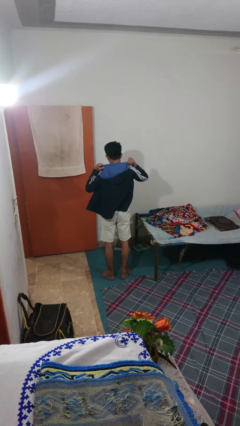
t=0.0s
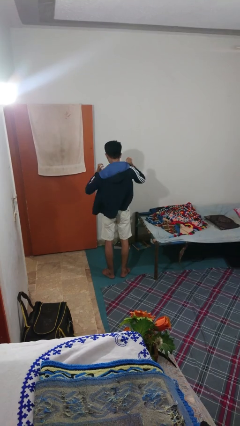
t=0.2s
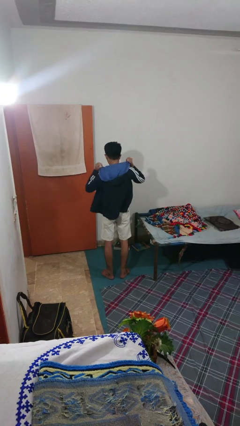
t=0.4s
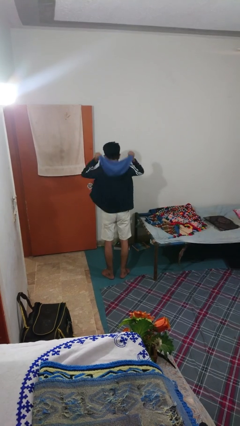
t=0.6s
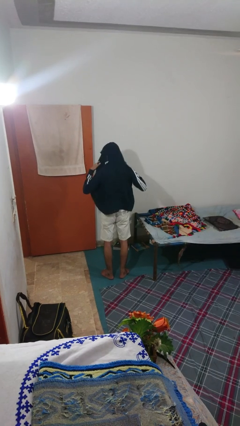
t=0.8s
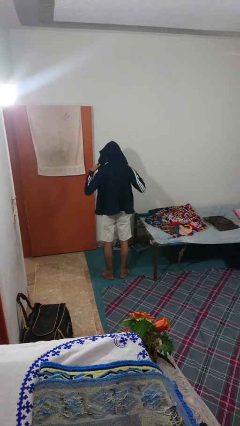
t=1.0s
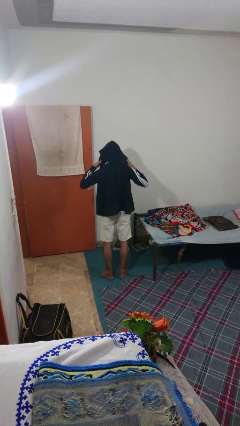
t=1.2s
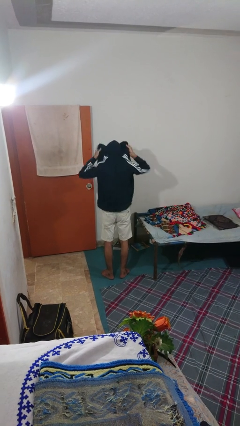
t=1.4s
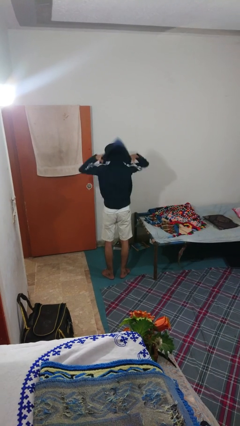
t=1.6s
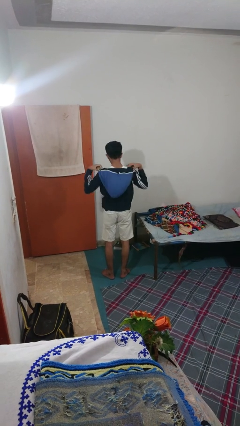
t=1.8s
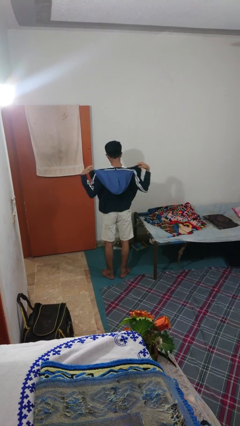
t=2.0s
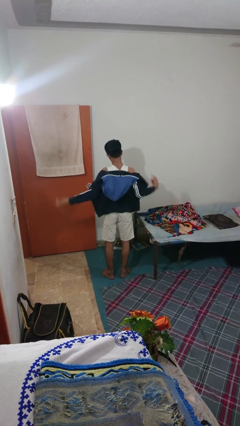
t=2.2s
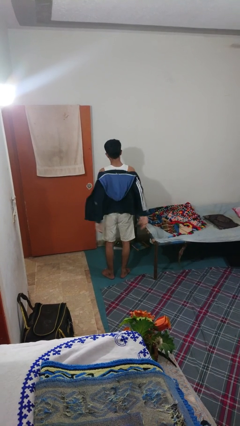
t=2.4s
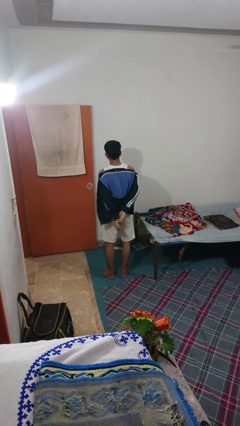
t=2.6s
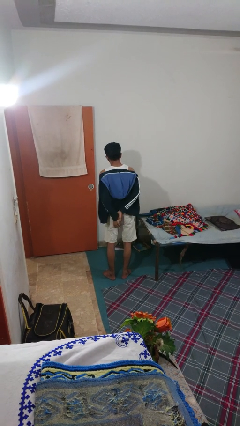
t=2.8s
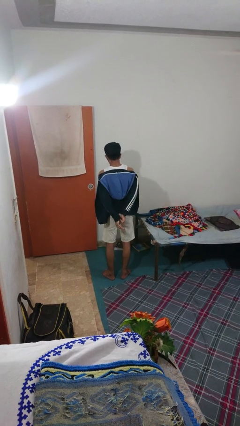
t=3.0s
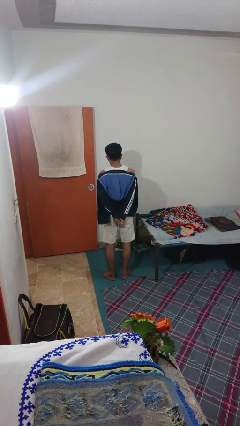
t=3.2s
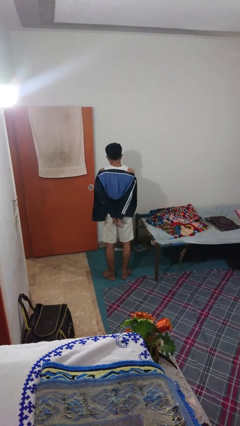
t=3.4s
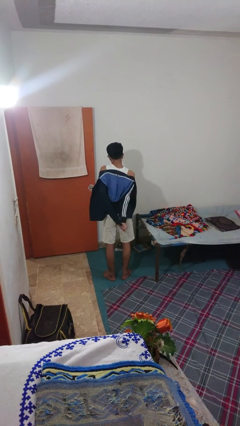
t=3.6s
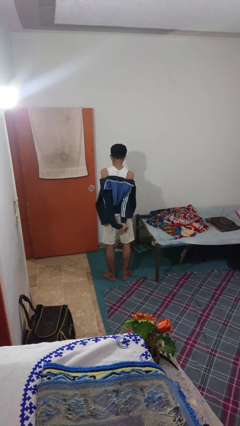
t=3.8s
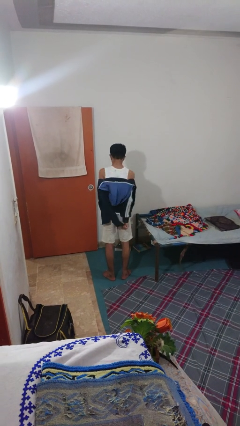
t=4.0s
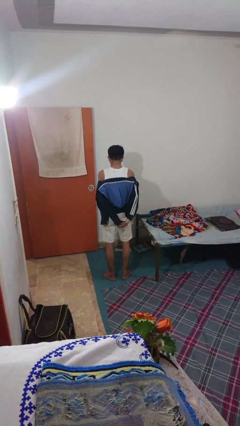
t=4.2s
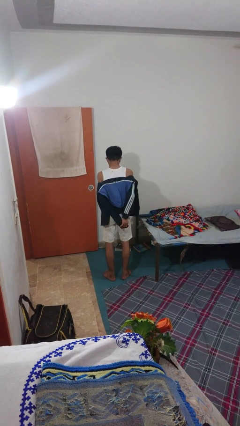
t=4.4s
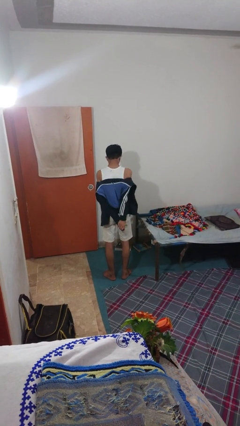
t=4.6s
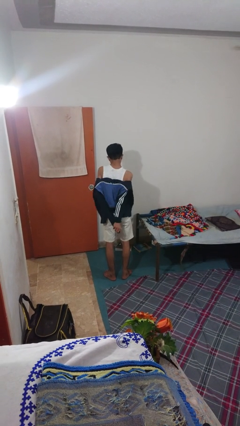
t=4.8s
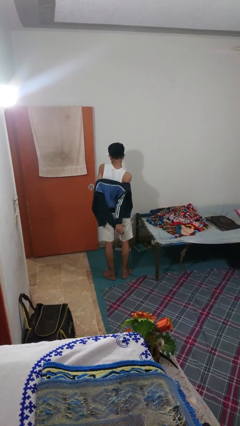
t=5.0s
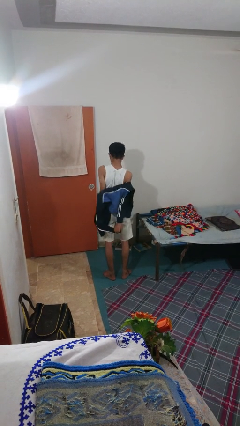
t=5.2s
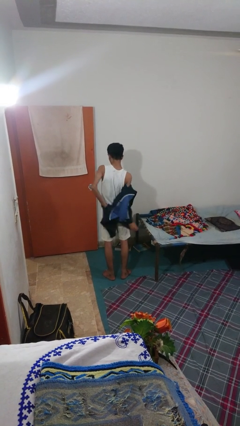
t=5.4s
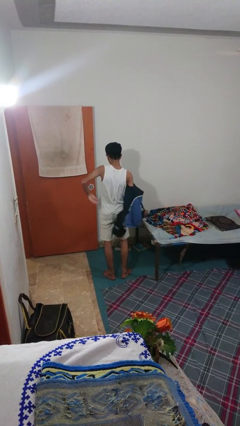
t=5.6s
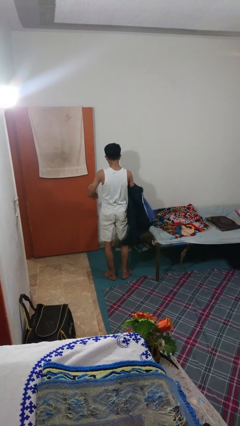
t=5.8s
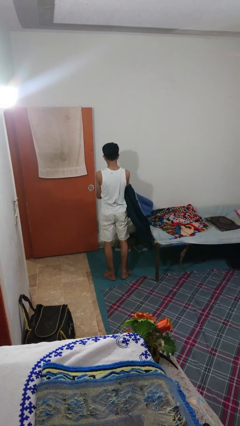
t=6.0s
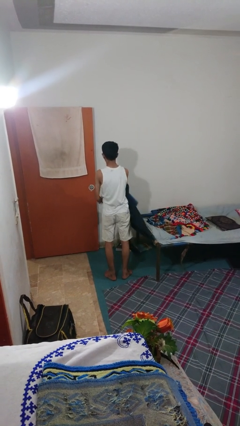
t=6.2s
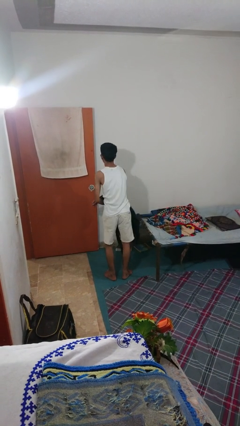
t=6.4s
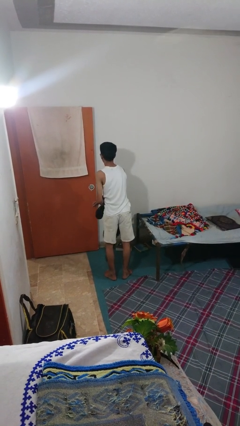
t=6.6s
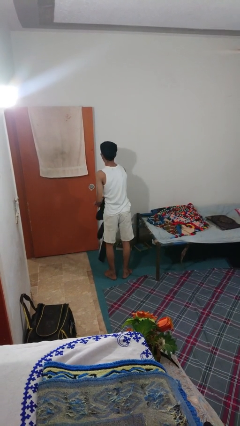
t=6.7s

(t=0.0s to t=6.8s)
person takes off hoodie

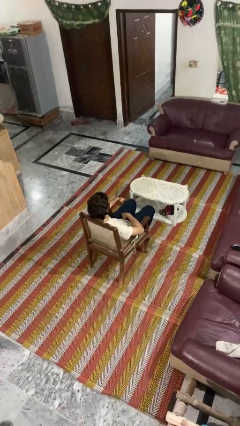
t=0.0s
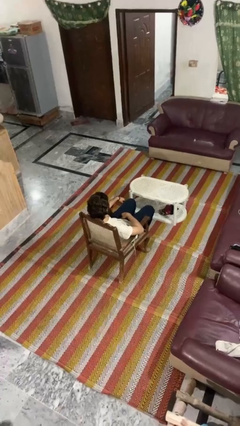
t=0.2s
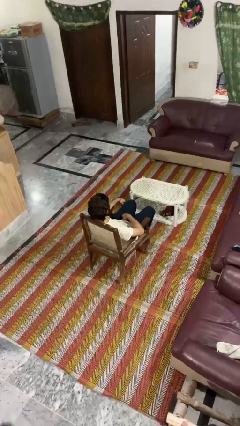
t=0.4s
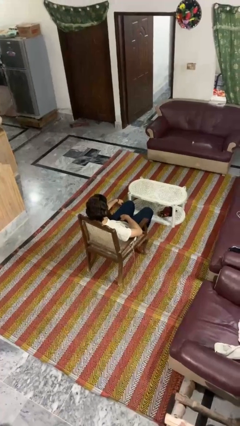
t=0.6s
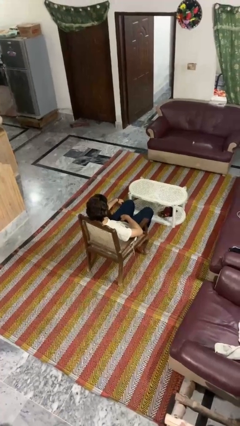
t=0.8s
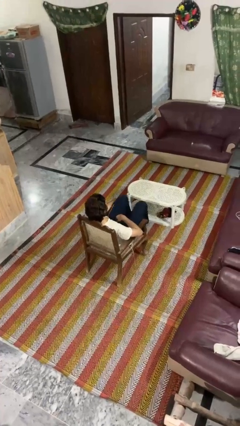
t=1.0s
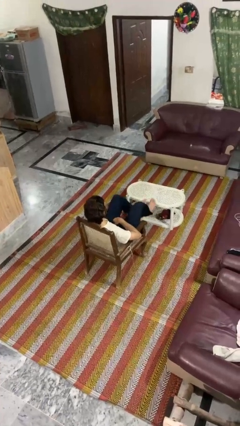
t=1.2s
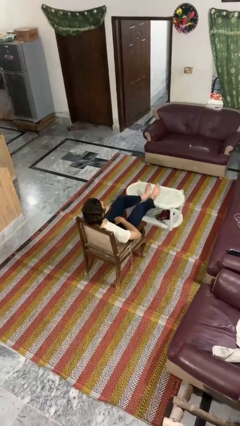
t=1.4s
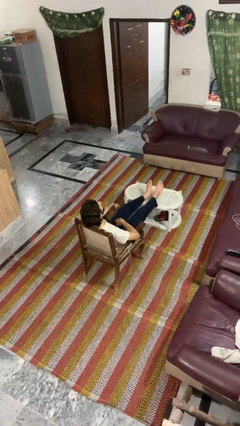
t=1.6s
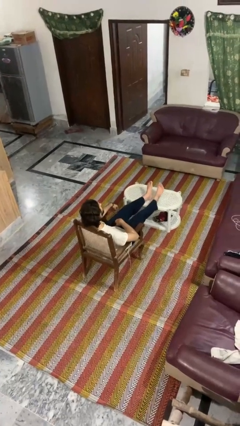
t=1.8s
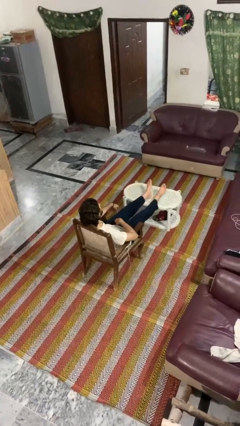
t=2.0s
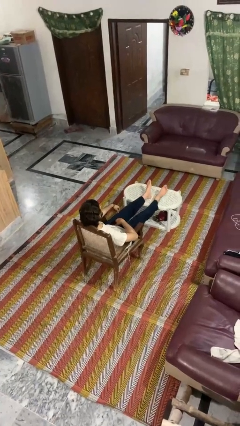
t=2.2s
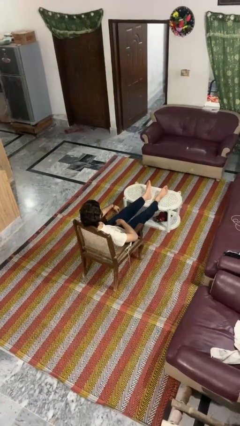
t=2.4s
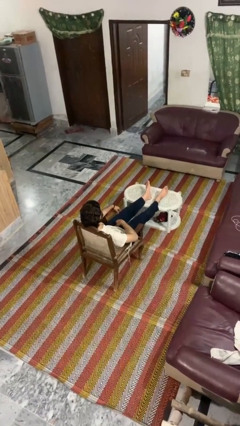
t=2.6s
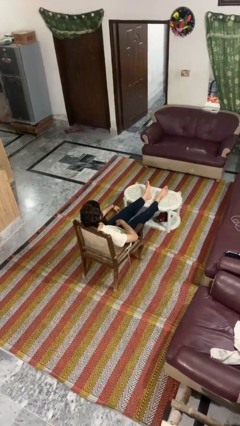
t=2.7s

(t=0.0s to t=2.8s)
person puts feet up

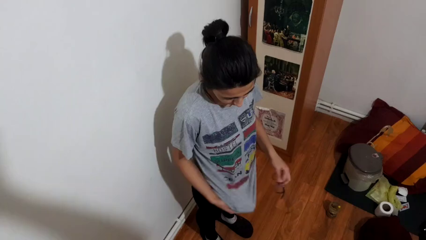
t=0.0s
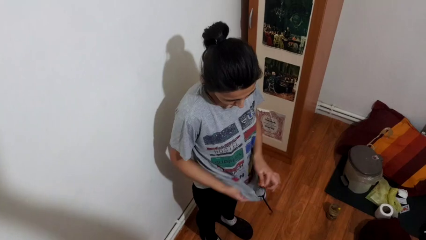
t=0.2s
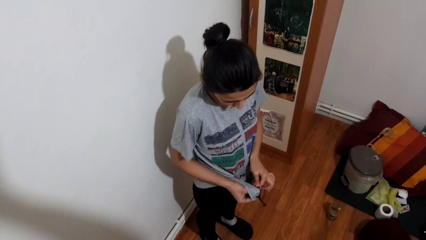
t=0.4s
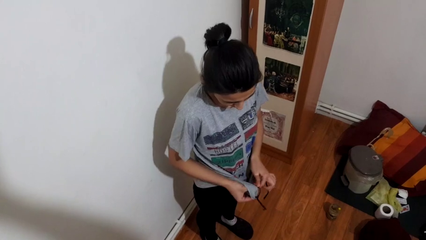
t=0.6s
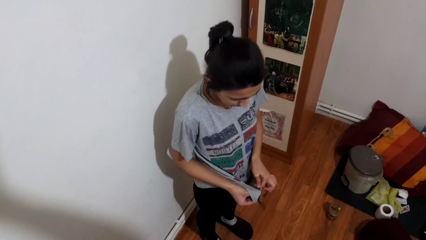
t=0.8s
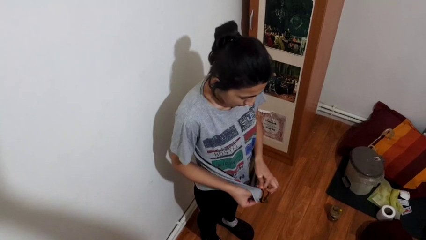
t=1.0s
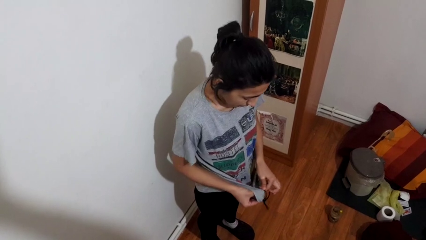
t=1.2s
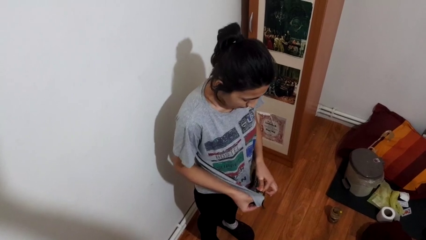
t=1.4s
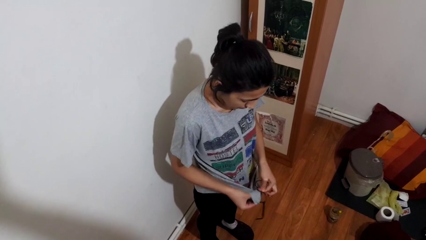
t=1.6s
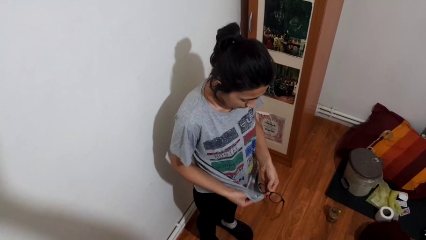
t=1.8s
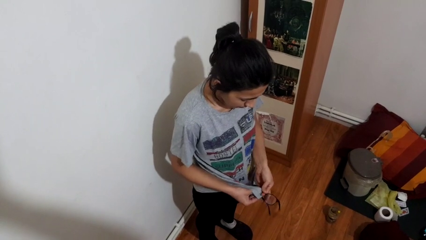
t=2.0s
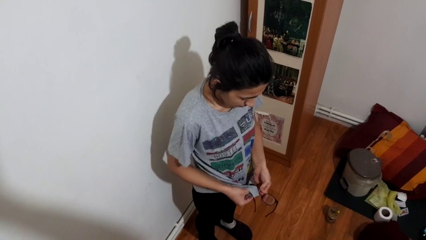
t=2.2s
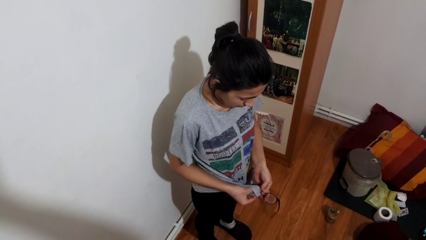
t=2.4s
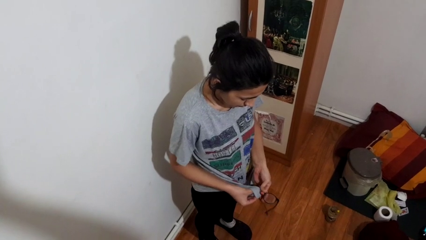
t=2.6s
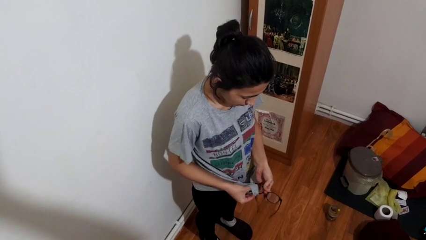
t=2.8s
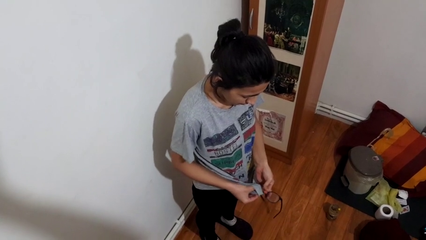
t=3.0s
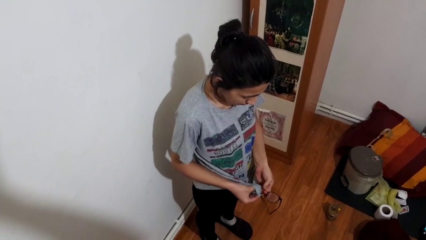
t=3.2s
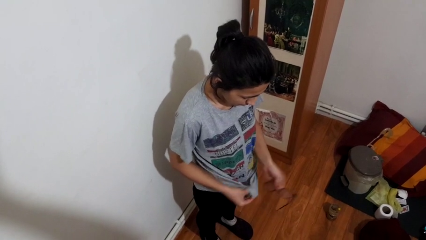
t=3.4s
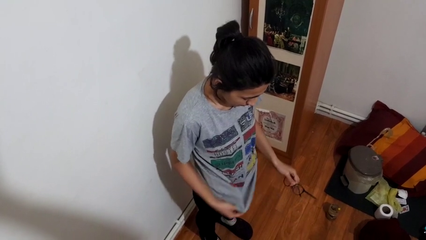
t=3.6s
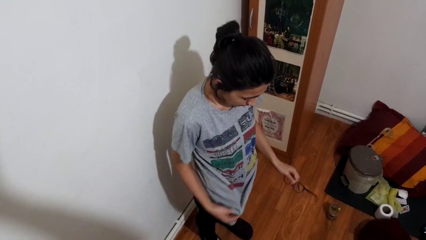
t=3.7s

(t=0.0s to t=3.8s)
person cleans eyeglasses

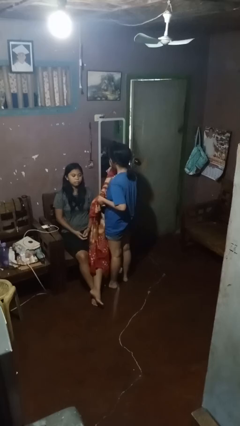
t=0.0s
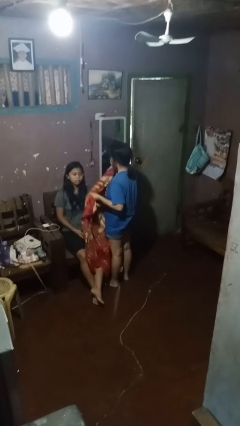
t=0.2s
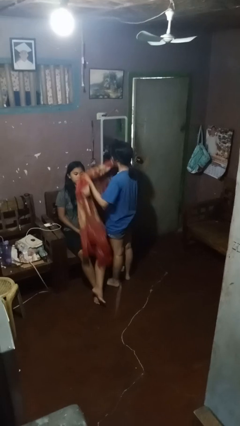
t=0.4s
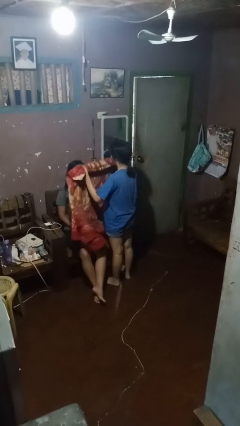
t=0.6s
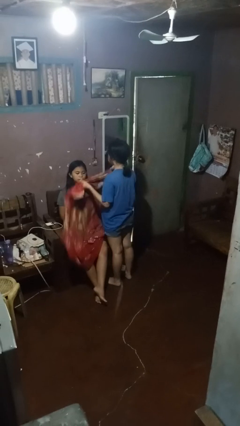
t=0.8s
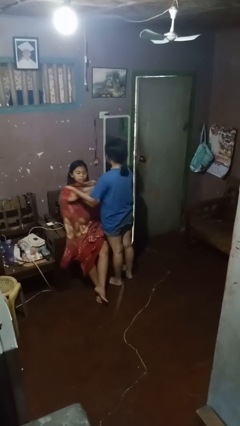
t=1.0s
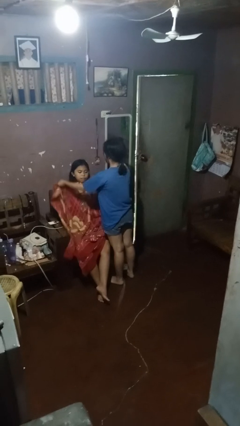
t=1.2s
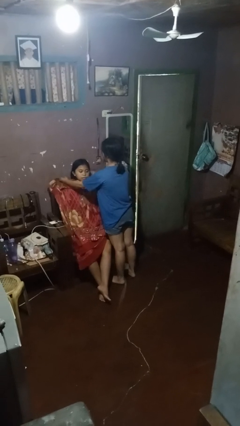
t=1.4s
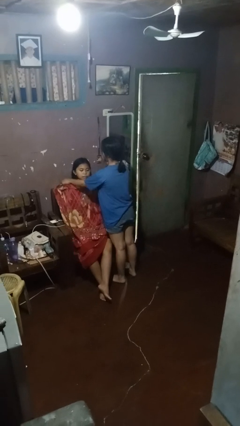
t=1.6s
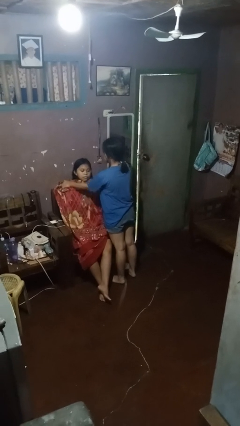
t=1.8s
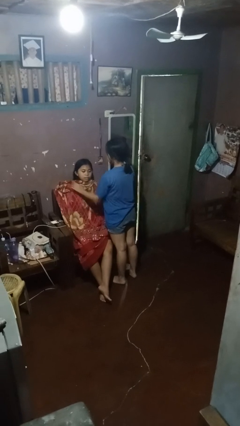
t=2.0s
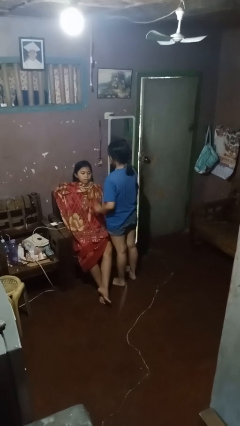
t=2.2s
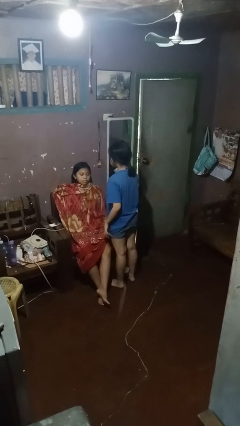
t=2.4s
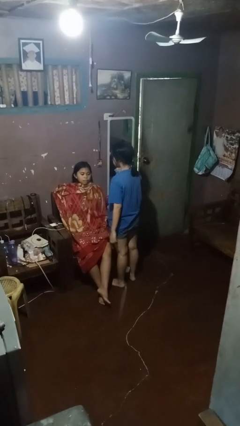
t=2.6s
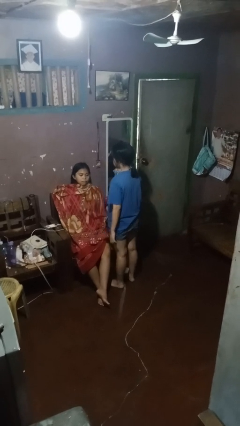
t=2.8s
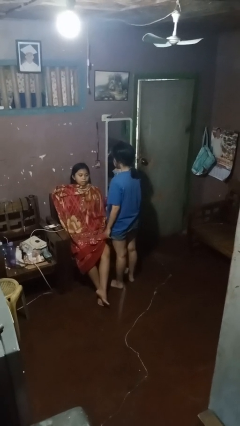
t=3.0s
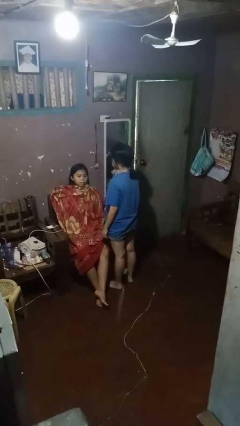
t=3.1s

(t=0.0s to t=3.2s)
person covers friend with blanket

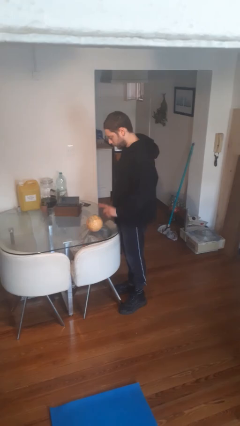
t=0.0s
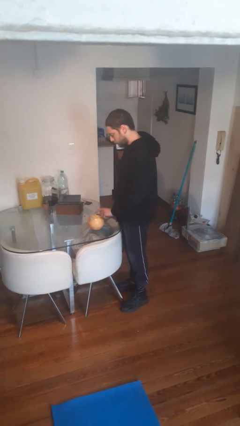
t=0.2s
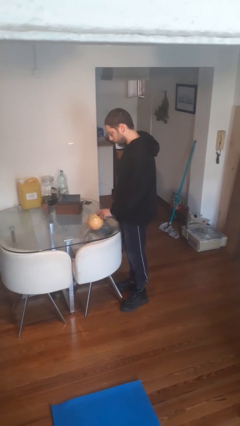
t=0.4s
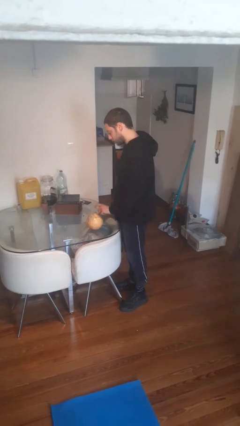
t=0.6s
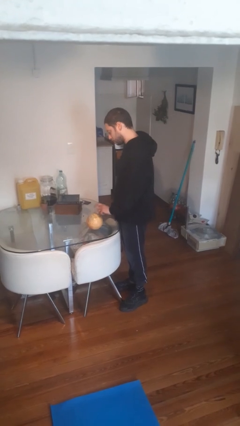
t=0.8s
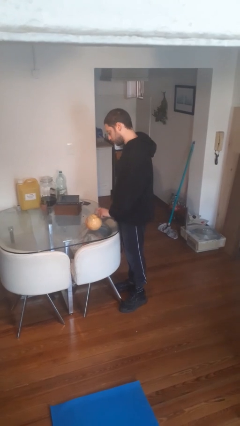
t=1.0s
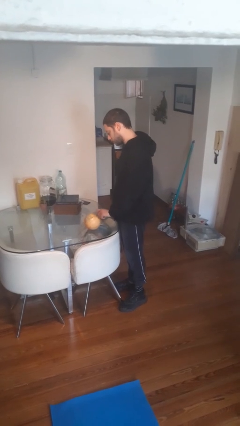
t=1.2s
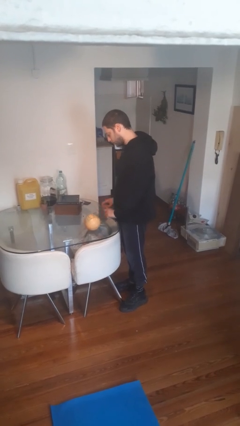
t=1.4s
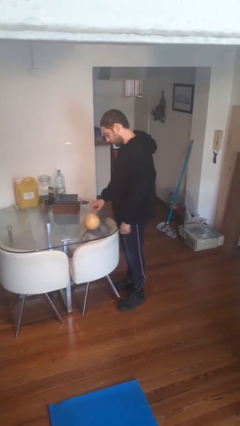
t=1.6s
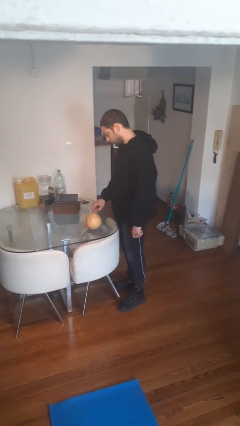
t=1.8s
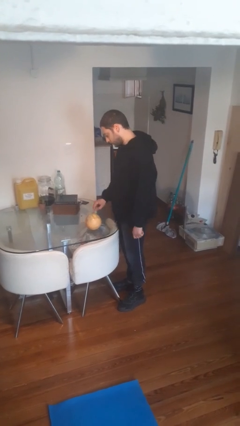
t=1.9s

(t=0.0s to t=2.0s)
person taps object with finger
